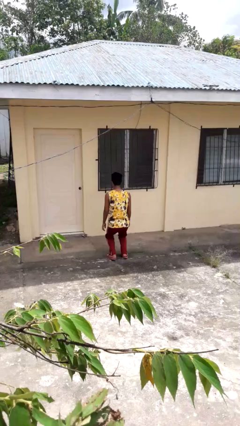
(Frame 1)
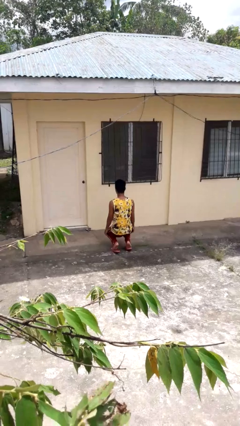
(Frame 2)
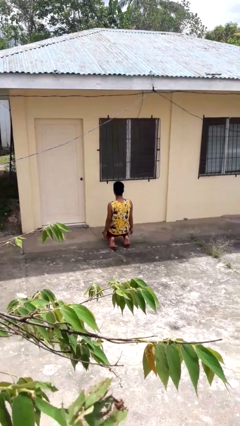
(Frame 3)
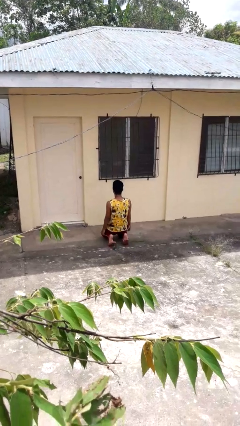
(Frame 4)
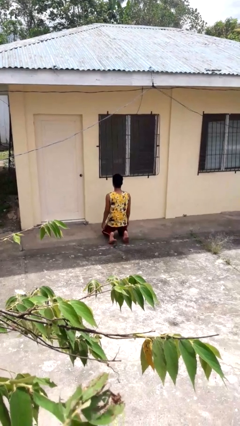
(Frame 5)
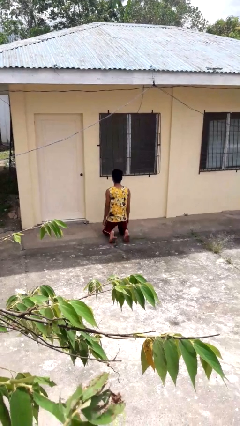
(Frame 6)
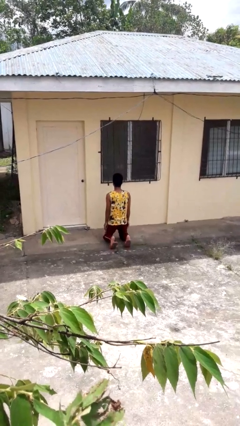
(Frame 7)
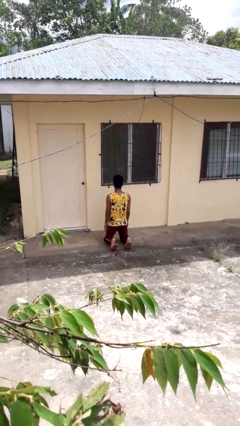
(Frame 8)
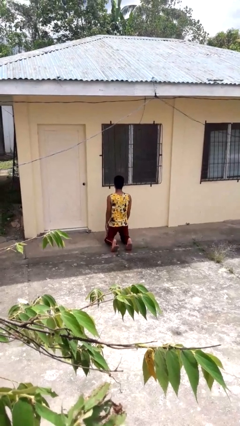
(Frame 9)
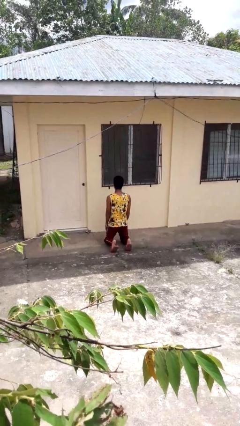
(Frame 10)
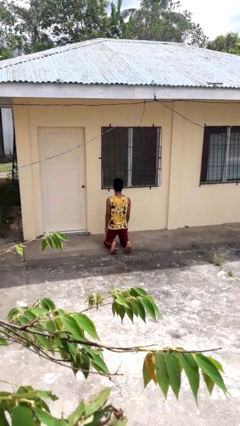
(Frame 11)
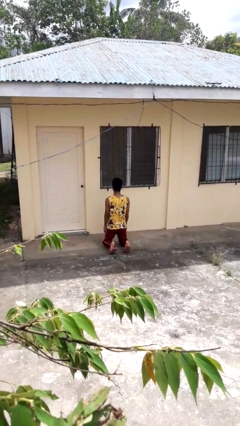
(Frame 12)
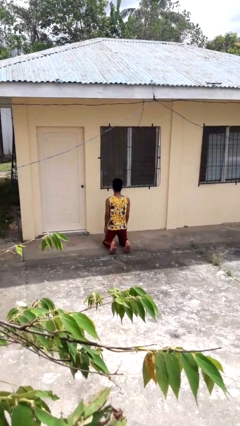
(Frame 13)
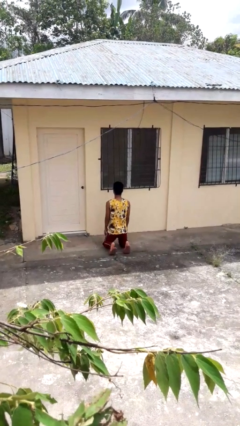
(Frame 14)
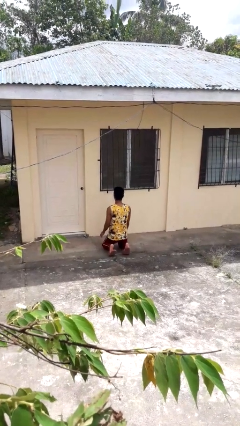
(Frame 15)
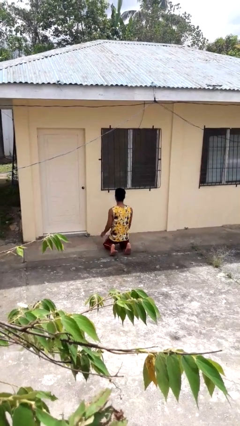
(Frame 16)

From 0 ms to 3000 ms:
person kneels

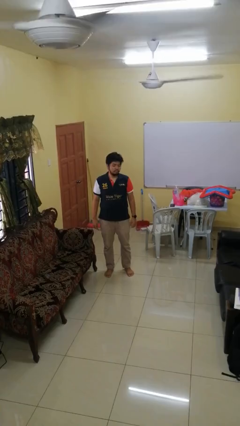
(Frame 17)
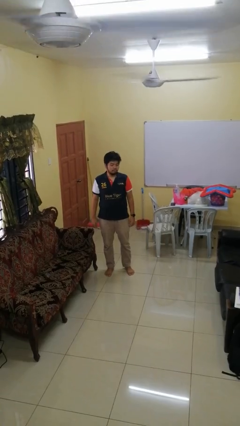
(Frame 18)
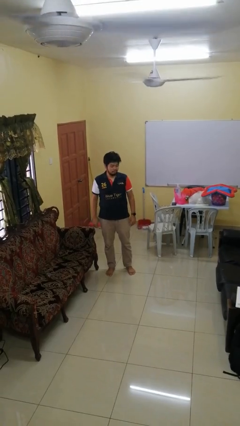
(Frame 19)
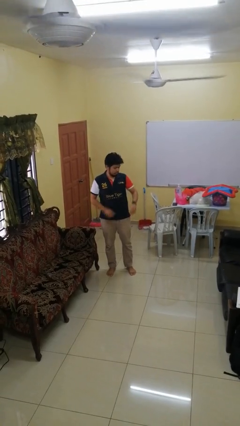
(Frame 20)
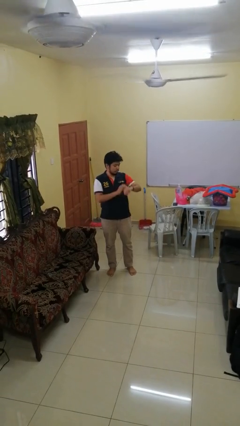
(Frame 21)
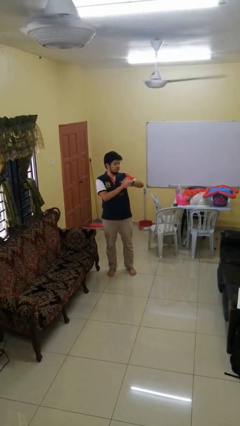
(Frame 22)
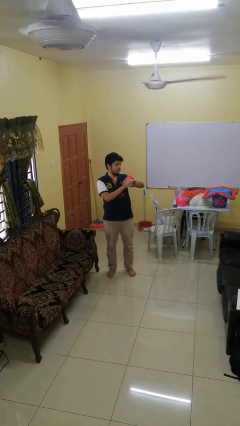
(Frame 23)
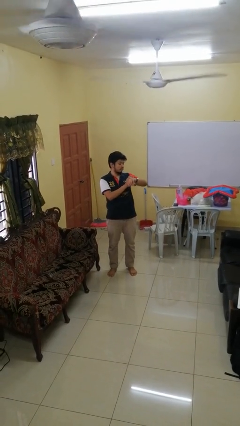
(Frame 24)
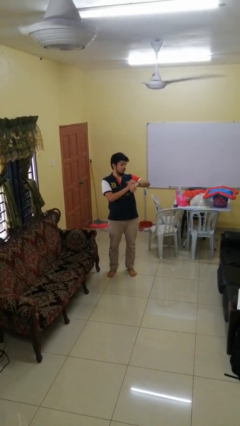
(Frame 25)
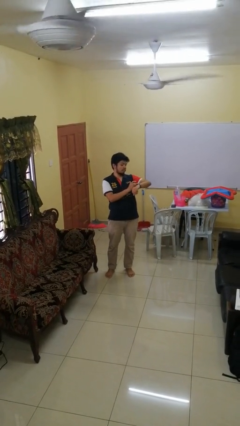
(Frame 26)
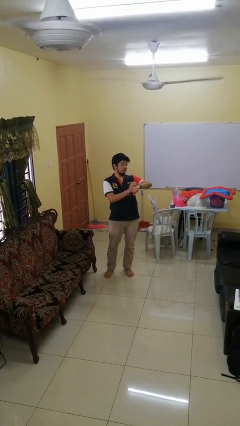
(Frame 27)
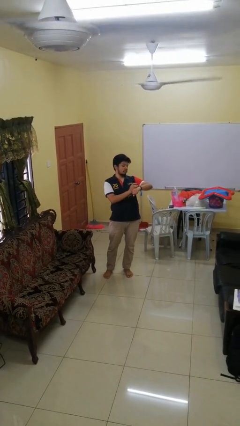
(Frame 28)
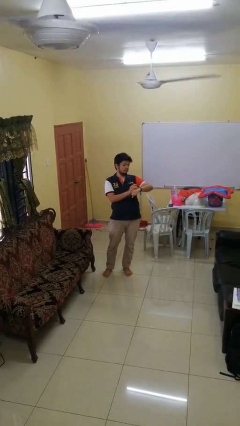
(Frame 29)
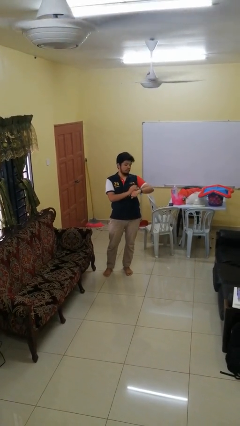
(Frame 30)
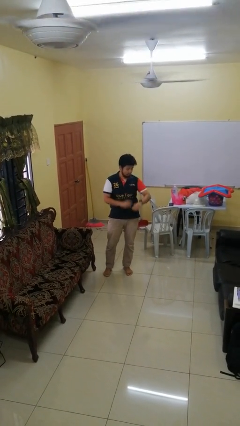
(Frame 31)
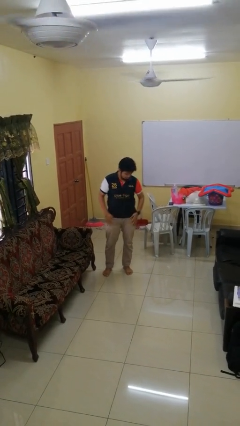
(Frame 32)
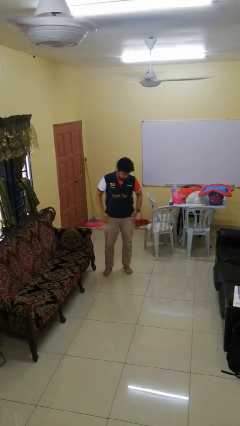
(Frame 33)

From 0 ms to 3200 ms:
person looks at wristwatch

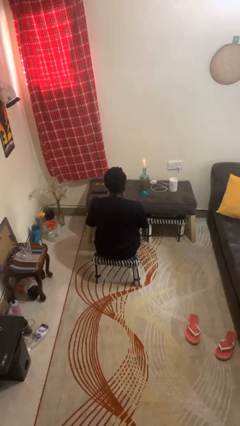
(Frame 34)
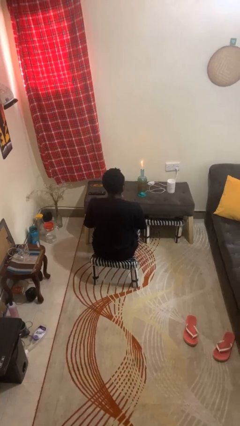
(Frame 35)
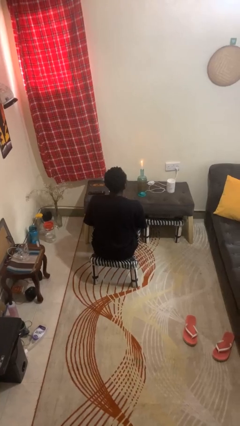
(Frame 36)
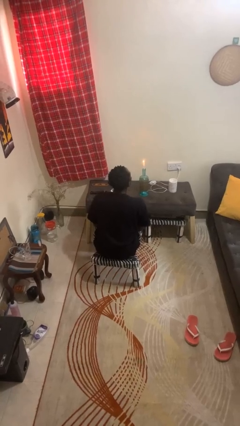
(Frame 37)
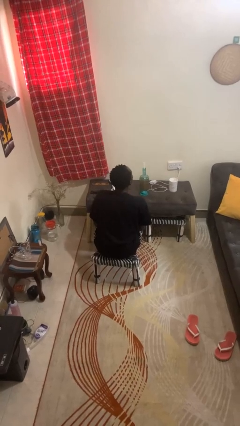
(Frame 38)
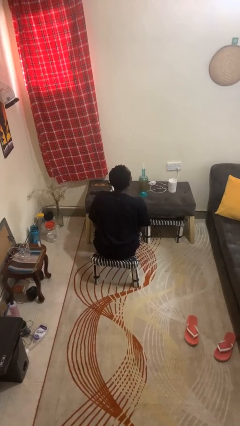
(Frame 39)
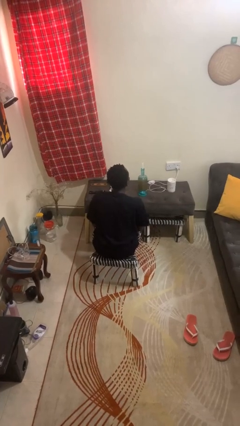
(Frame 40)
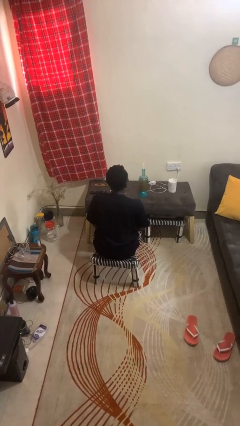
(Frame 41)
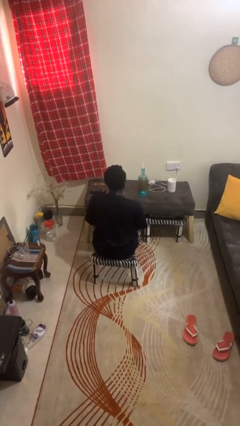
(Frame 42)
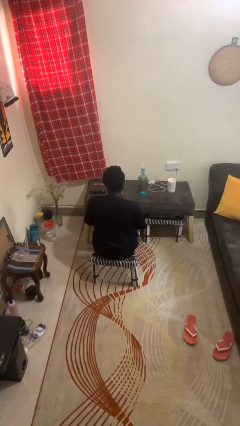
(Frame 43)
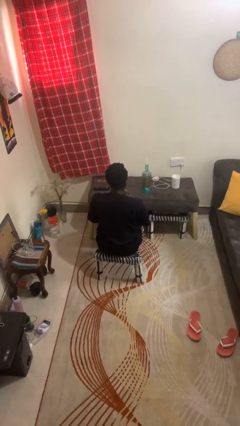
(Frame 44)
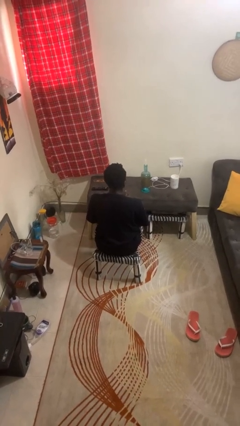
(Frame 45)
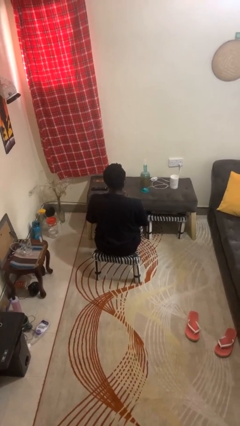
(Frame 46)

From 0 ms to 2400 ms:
person extinguishes candle

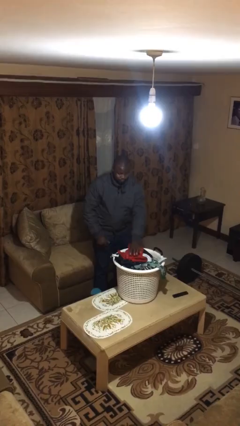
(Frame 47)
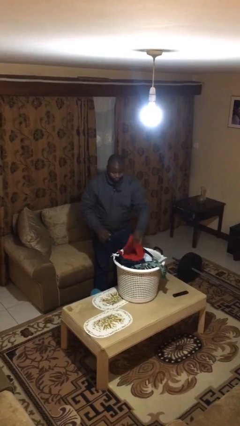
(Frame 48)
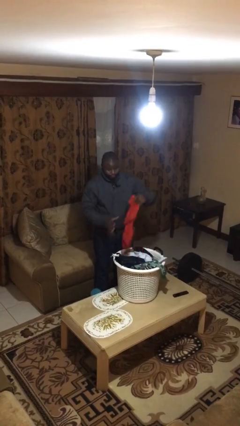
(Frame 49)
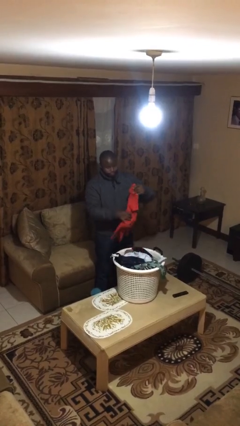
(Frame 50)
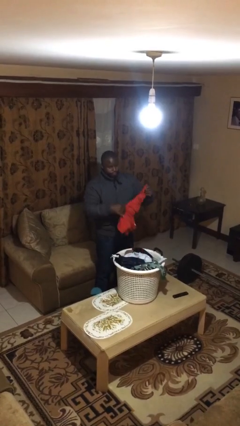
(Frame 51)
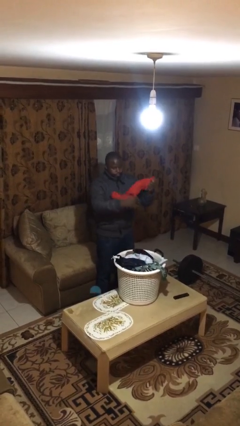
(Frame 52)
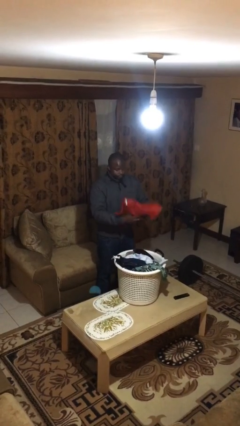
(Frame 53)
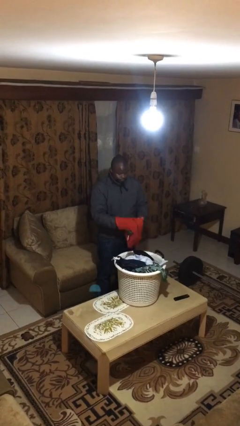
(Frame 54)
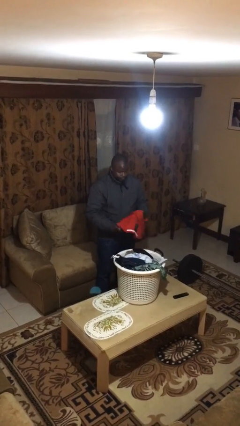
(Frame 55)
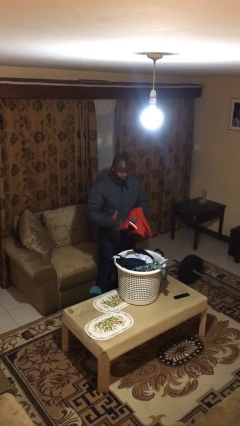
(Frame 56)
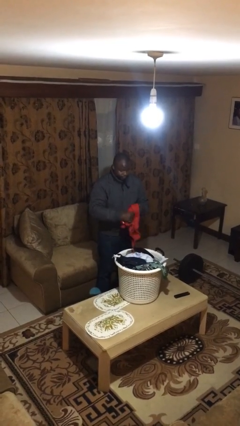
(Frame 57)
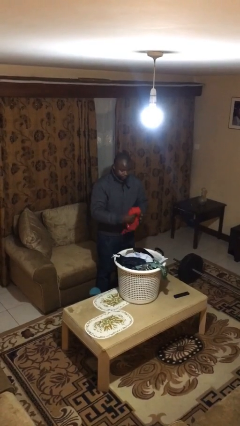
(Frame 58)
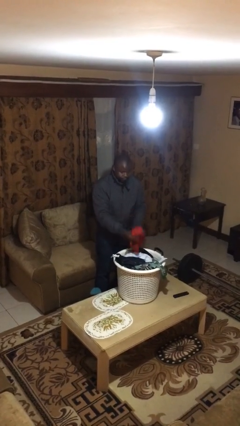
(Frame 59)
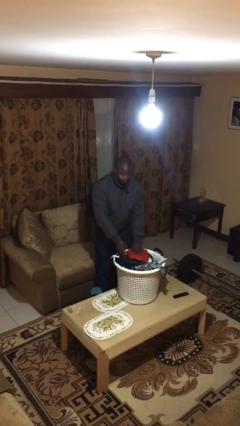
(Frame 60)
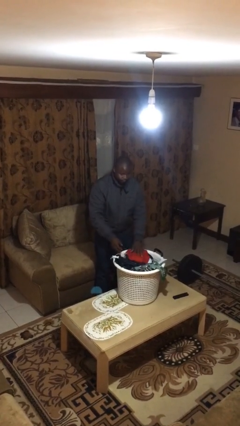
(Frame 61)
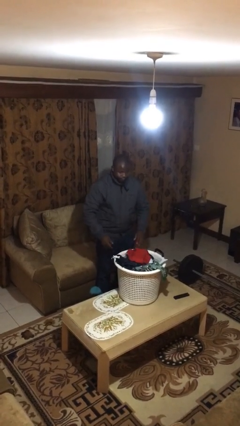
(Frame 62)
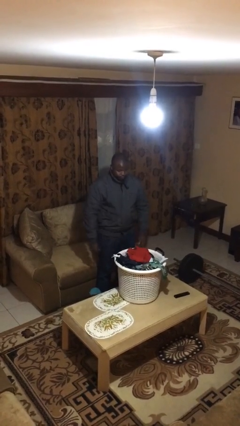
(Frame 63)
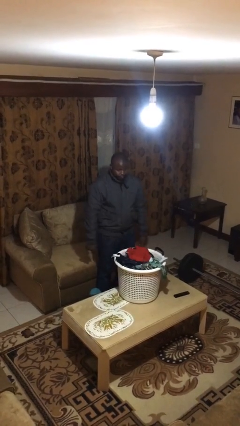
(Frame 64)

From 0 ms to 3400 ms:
person folds shirt

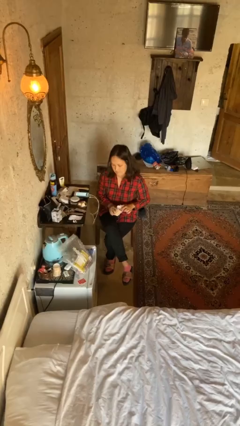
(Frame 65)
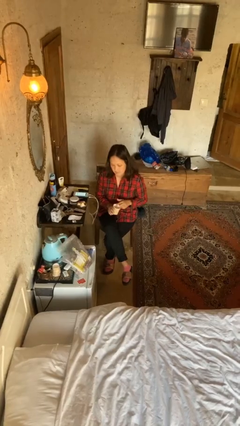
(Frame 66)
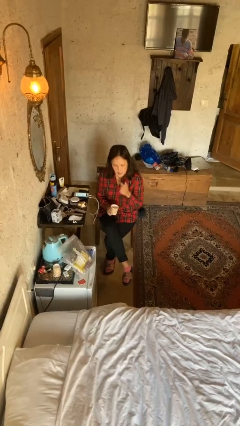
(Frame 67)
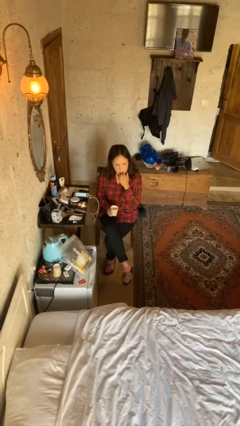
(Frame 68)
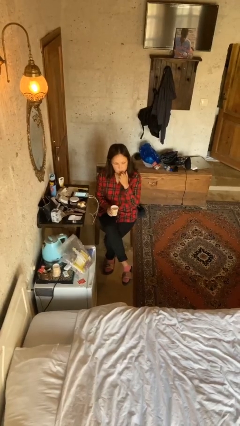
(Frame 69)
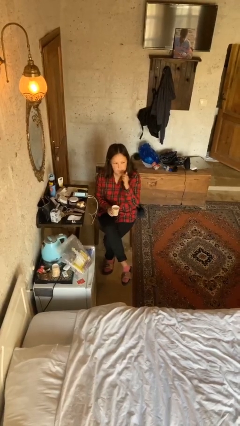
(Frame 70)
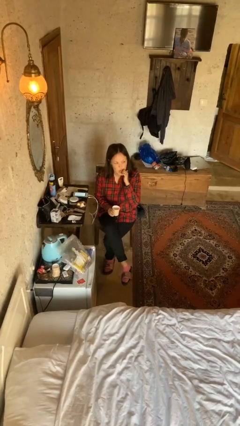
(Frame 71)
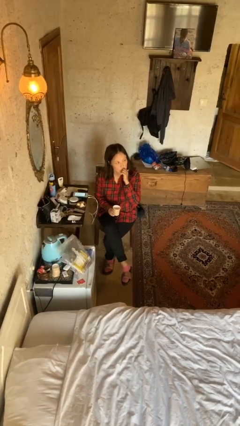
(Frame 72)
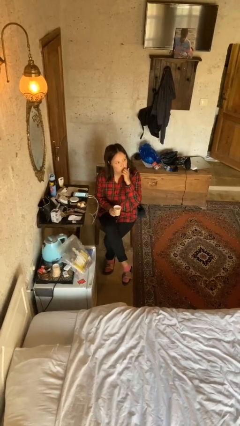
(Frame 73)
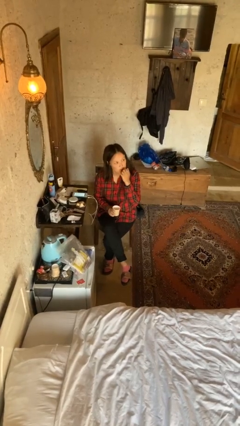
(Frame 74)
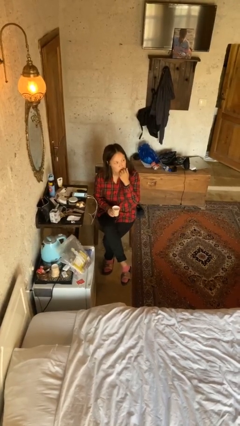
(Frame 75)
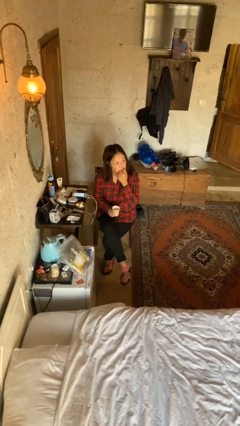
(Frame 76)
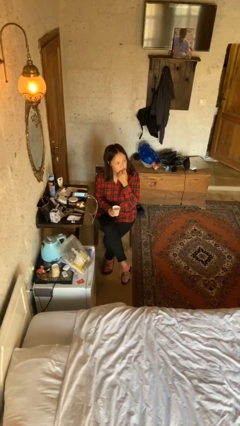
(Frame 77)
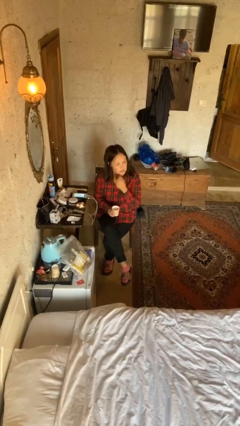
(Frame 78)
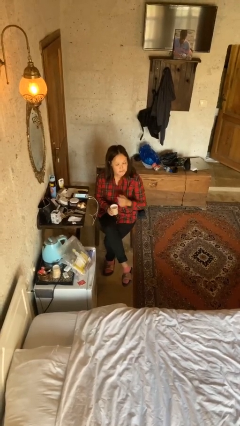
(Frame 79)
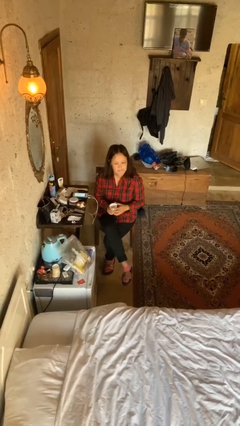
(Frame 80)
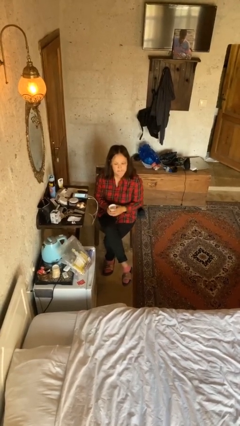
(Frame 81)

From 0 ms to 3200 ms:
person licks fingers

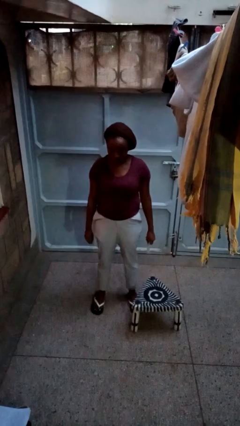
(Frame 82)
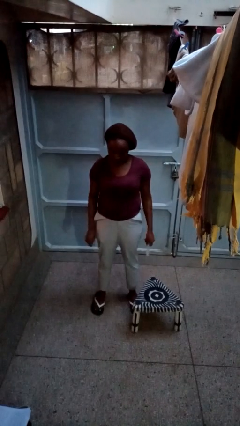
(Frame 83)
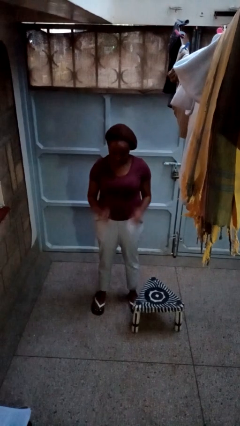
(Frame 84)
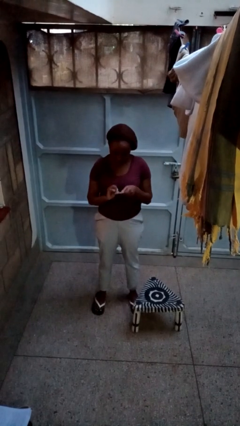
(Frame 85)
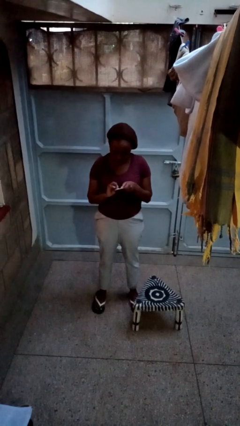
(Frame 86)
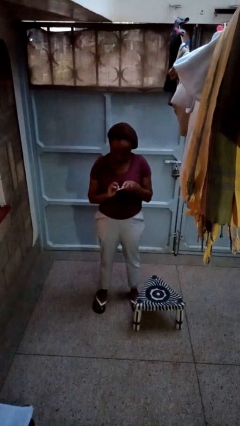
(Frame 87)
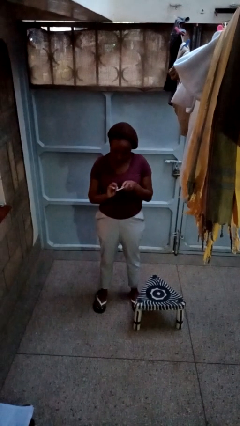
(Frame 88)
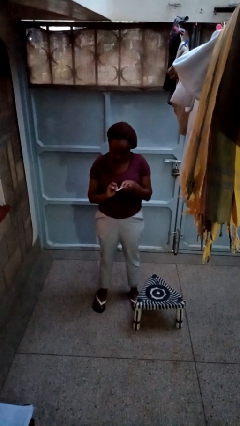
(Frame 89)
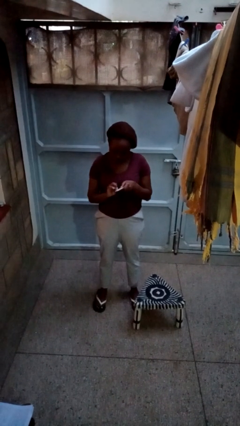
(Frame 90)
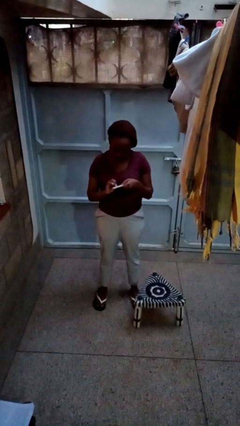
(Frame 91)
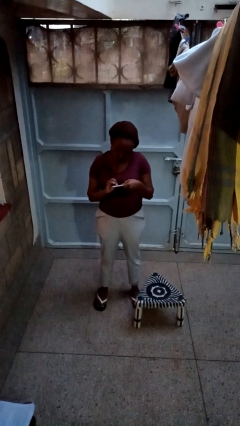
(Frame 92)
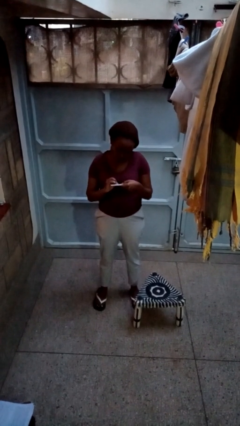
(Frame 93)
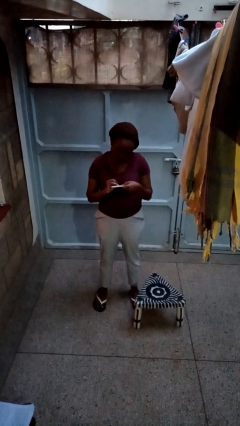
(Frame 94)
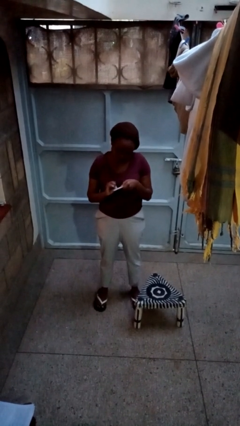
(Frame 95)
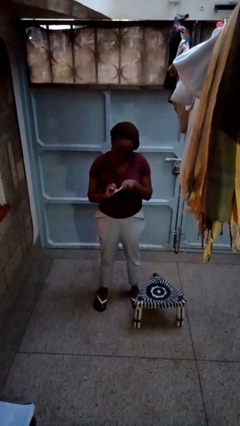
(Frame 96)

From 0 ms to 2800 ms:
person files fingernails
